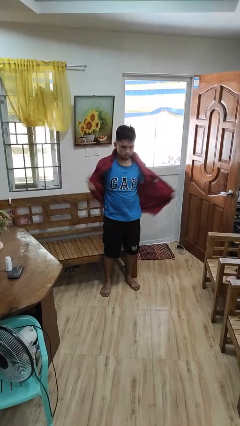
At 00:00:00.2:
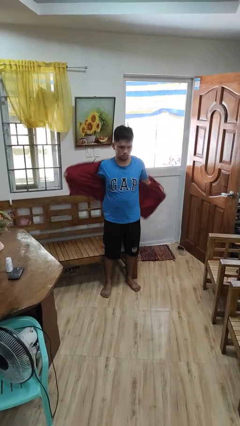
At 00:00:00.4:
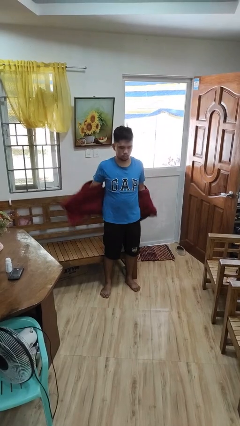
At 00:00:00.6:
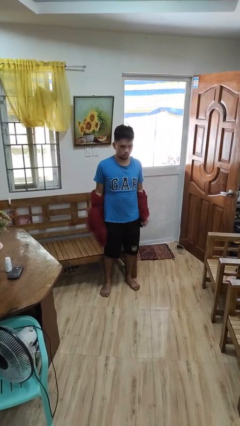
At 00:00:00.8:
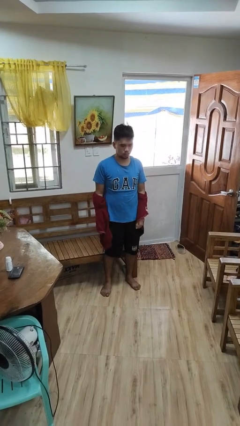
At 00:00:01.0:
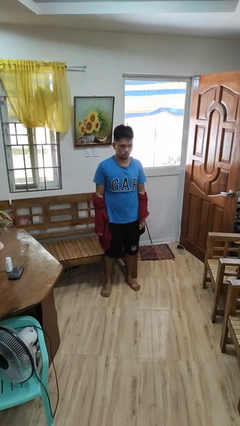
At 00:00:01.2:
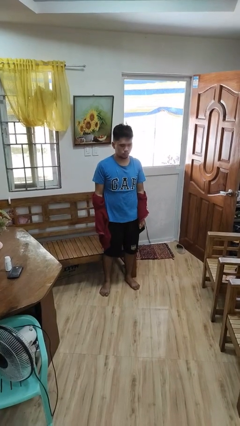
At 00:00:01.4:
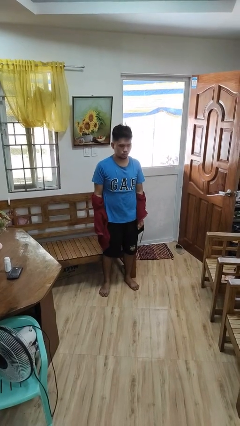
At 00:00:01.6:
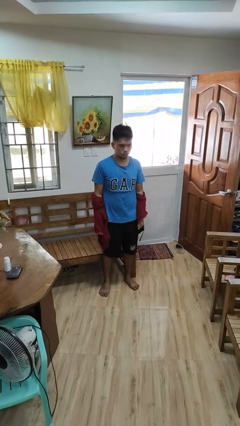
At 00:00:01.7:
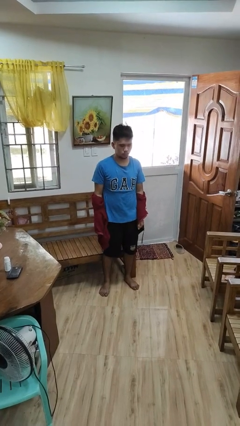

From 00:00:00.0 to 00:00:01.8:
person takes off jacket

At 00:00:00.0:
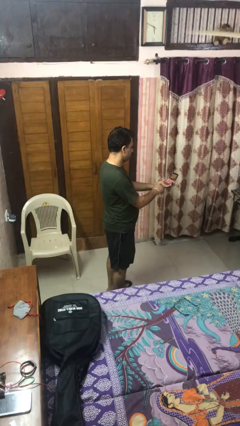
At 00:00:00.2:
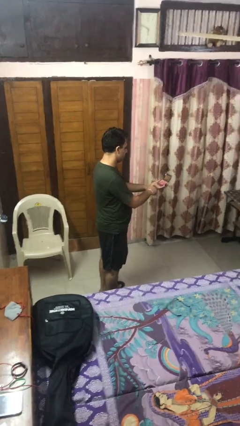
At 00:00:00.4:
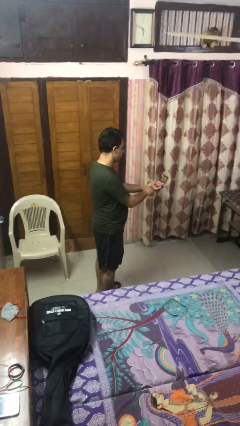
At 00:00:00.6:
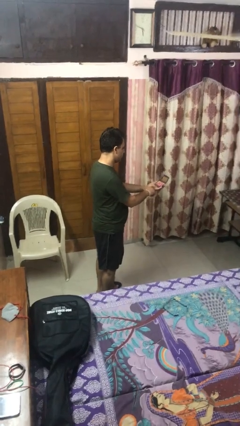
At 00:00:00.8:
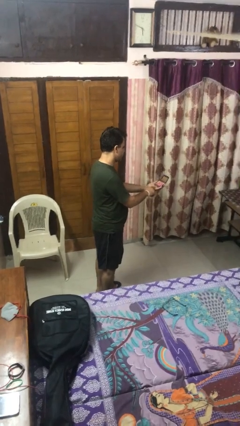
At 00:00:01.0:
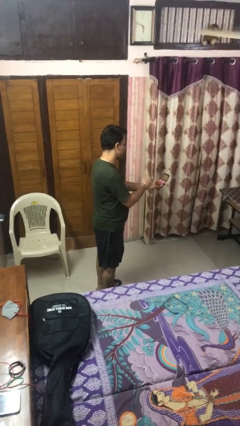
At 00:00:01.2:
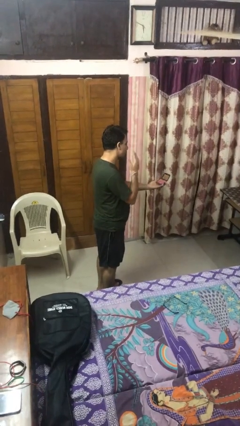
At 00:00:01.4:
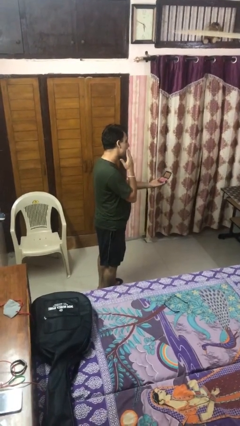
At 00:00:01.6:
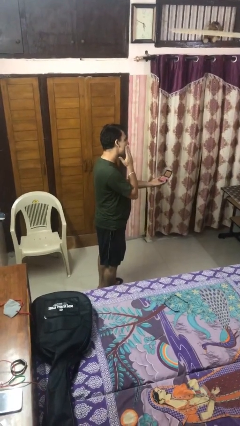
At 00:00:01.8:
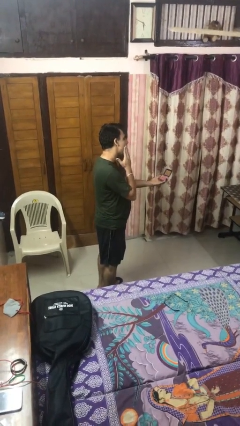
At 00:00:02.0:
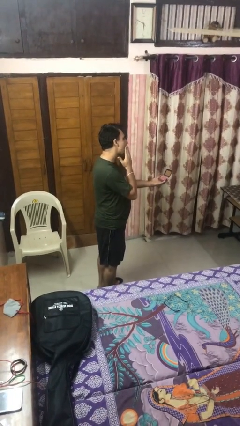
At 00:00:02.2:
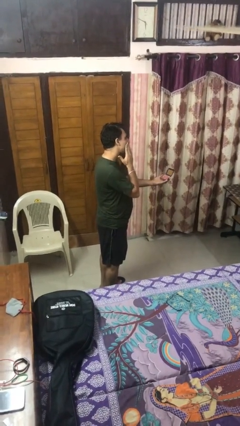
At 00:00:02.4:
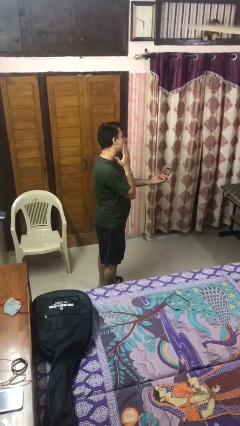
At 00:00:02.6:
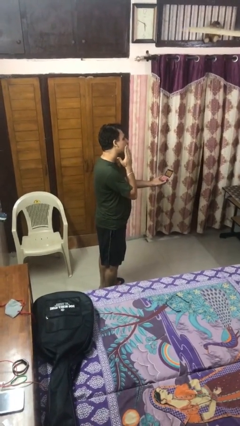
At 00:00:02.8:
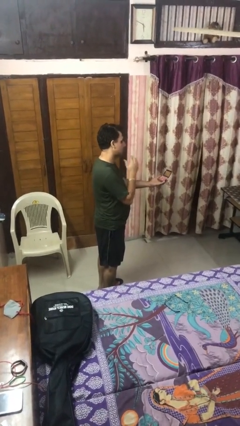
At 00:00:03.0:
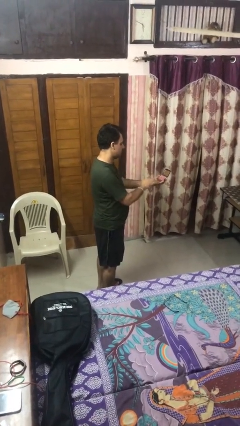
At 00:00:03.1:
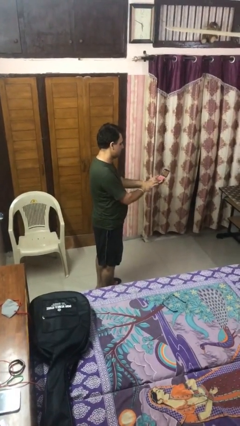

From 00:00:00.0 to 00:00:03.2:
person applies foundation makeup

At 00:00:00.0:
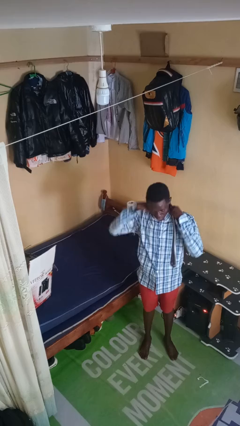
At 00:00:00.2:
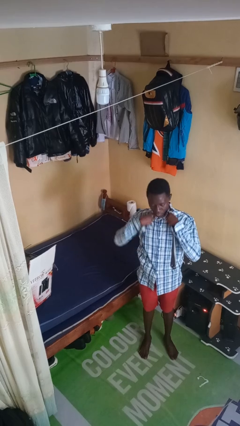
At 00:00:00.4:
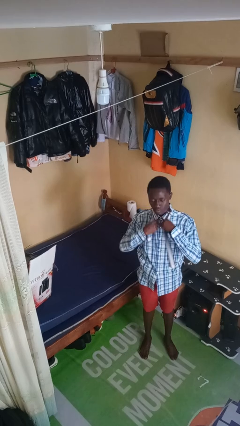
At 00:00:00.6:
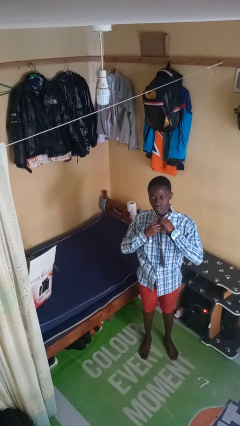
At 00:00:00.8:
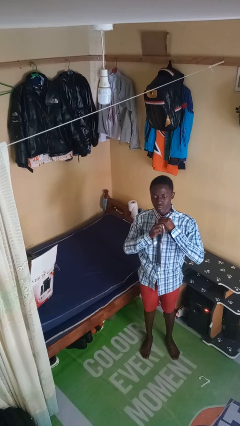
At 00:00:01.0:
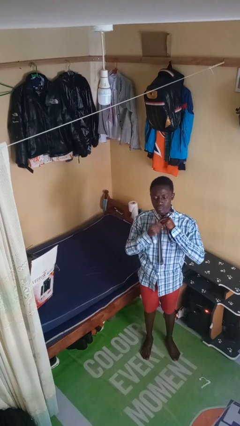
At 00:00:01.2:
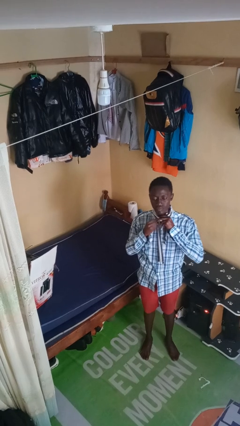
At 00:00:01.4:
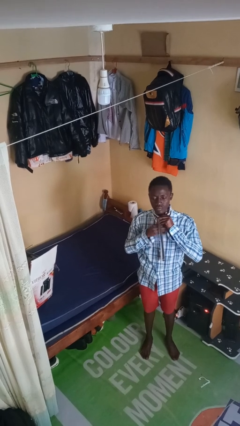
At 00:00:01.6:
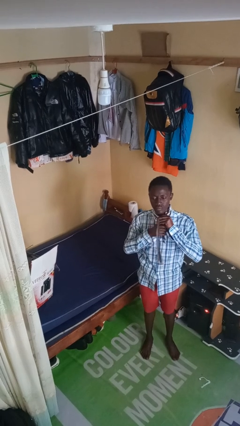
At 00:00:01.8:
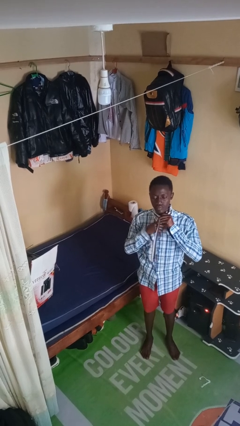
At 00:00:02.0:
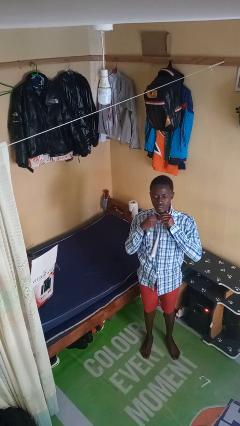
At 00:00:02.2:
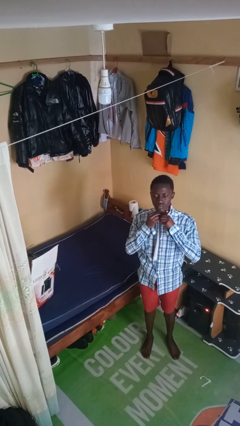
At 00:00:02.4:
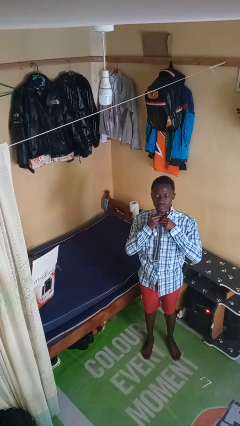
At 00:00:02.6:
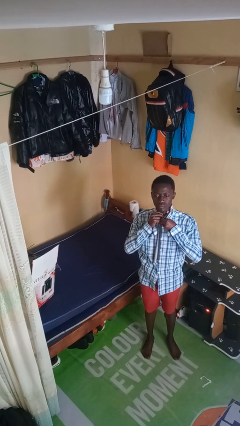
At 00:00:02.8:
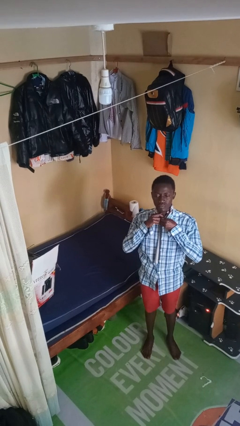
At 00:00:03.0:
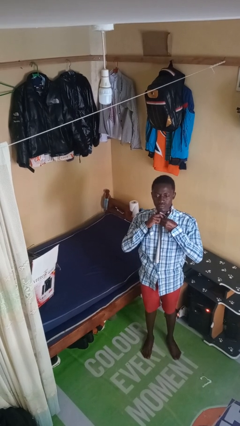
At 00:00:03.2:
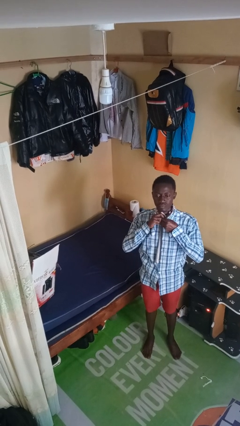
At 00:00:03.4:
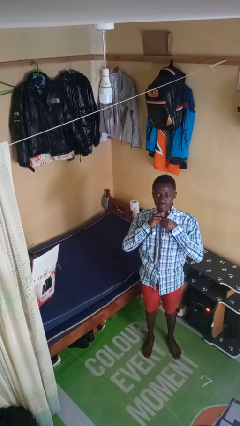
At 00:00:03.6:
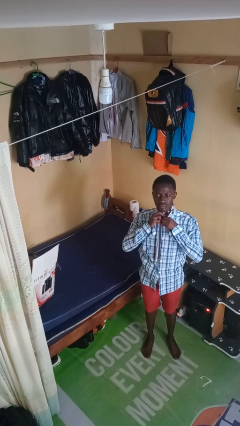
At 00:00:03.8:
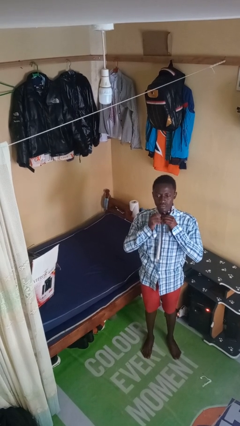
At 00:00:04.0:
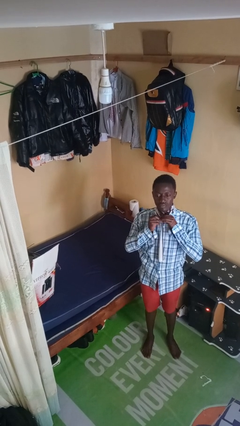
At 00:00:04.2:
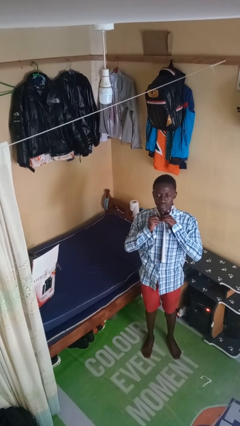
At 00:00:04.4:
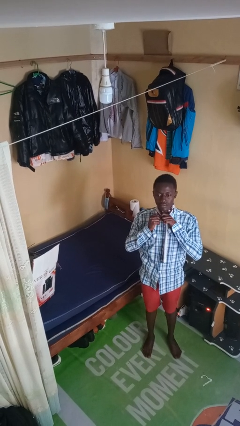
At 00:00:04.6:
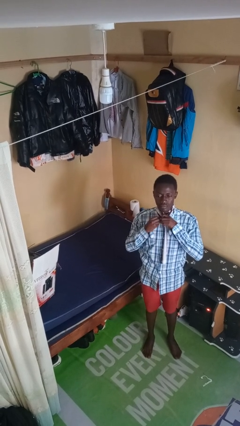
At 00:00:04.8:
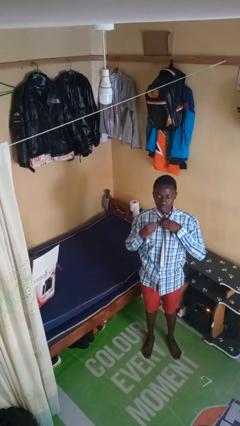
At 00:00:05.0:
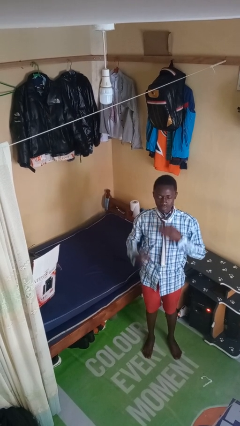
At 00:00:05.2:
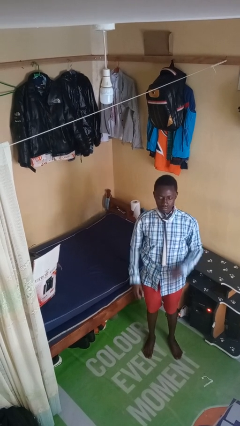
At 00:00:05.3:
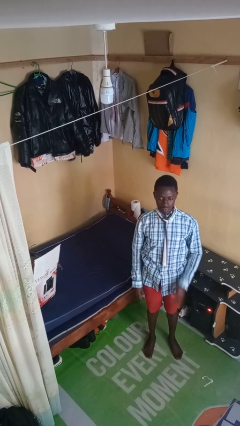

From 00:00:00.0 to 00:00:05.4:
person puts on necktie

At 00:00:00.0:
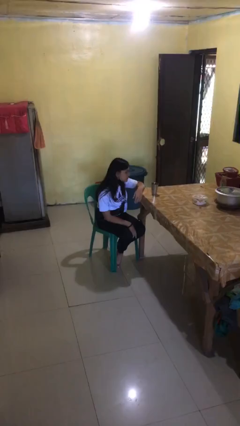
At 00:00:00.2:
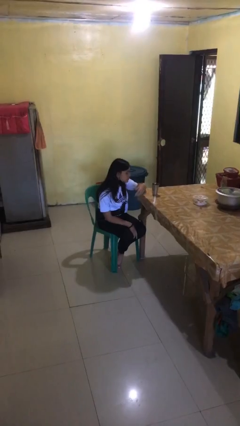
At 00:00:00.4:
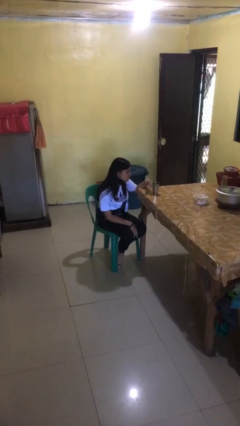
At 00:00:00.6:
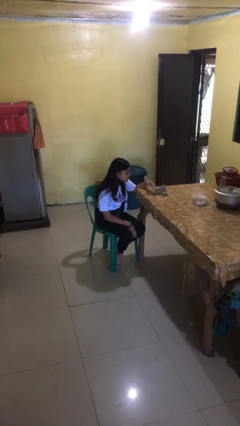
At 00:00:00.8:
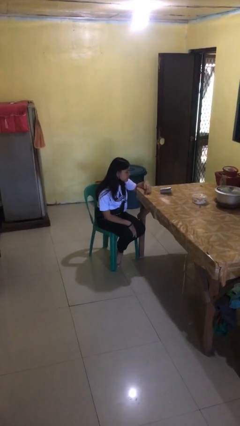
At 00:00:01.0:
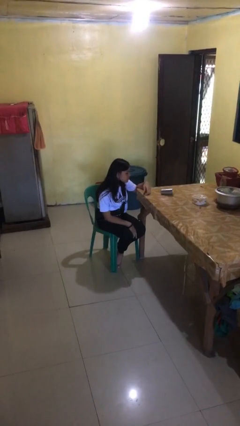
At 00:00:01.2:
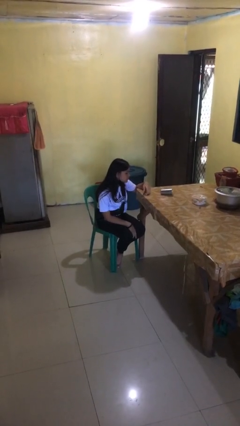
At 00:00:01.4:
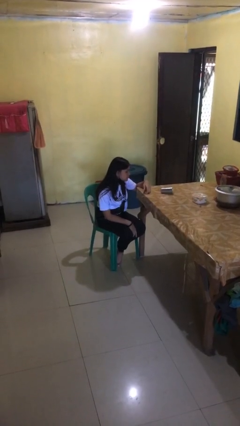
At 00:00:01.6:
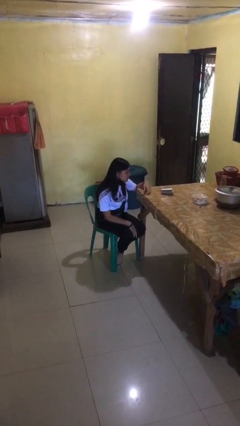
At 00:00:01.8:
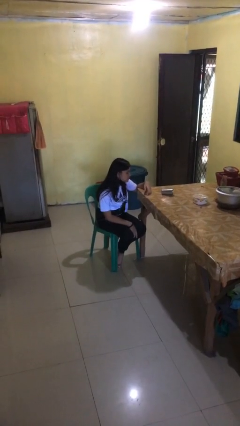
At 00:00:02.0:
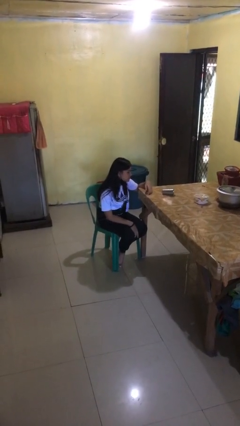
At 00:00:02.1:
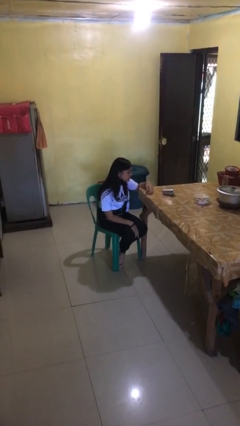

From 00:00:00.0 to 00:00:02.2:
person knocks over glass

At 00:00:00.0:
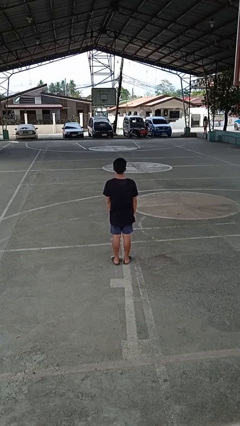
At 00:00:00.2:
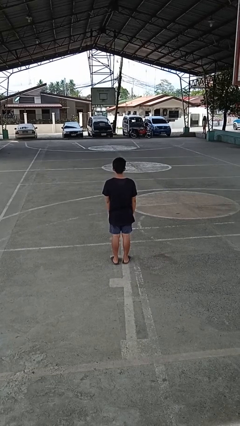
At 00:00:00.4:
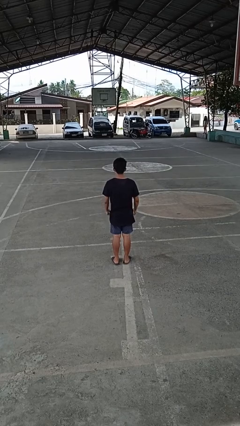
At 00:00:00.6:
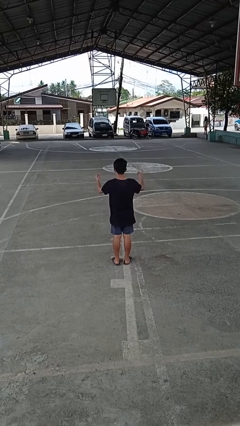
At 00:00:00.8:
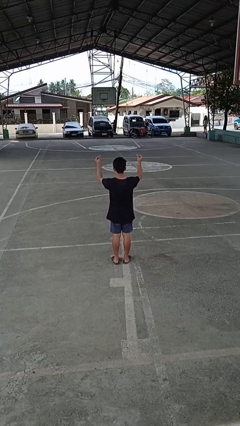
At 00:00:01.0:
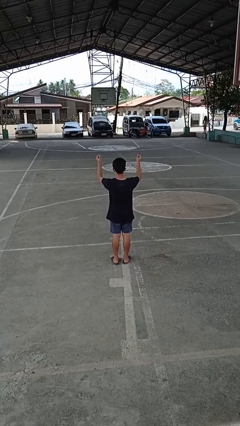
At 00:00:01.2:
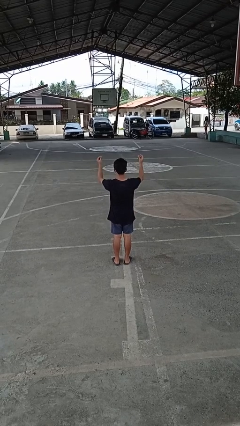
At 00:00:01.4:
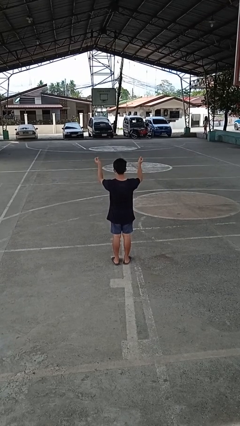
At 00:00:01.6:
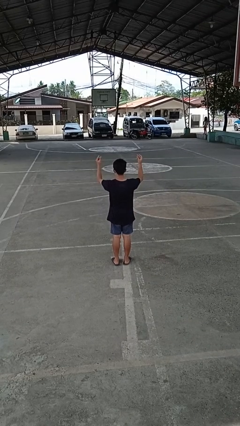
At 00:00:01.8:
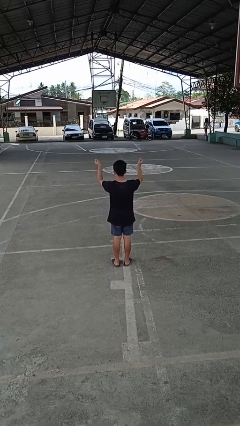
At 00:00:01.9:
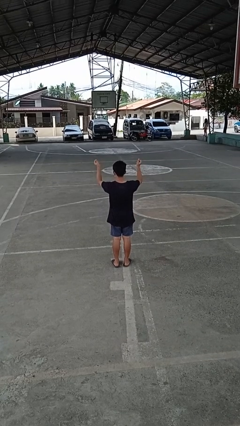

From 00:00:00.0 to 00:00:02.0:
person snaps fingers

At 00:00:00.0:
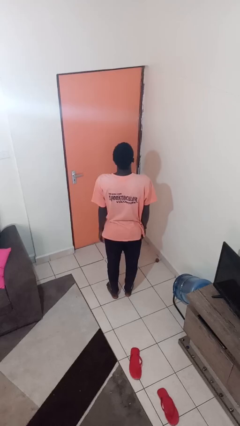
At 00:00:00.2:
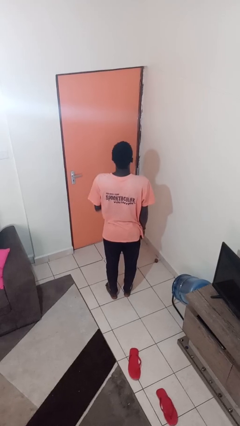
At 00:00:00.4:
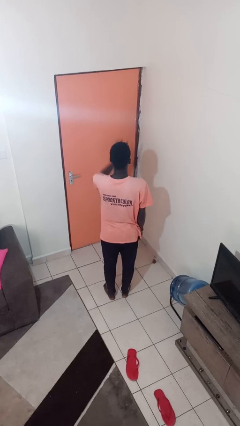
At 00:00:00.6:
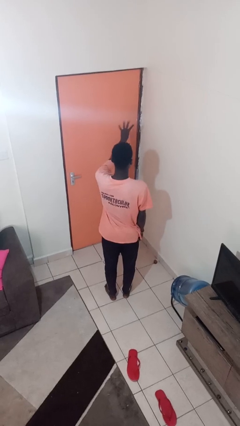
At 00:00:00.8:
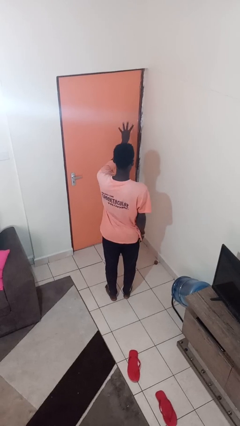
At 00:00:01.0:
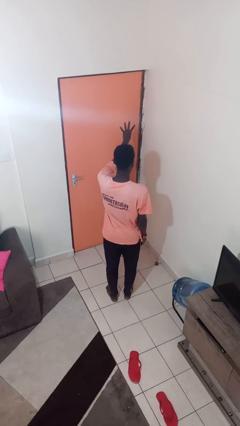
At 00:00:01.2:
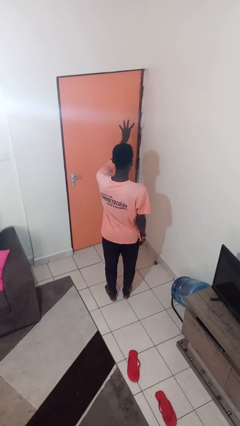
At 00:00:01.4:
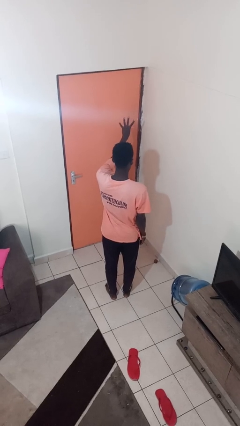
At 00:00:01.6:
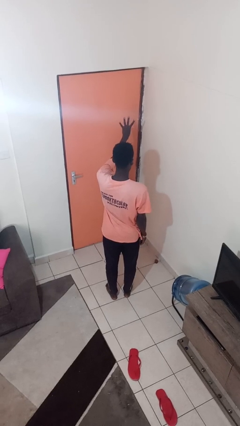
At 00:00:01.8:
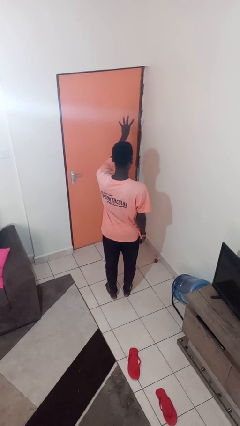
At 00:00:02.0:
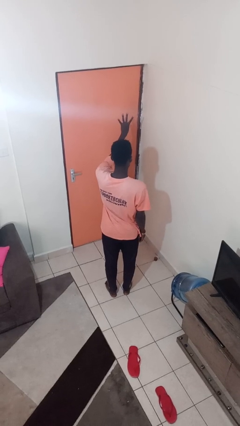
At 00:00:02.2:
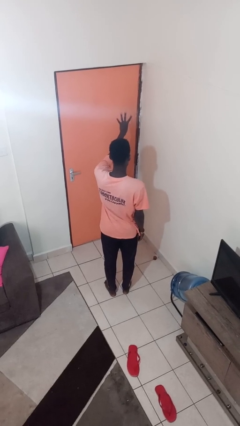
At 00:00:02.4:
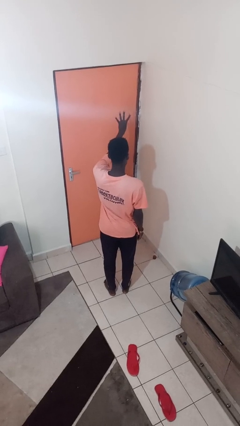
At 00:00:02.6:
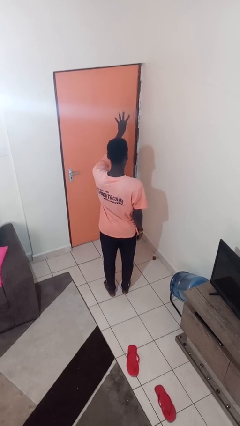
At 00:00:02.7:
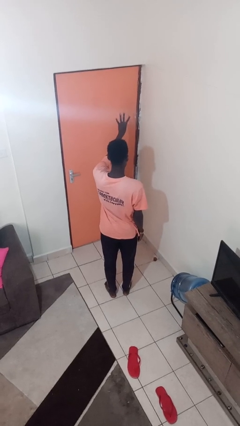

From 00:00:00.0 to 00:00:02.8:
person gestures number four
